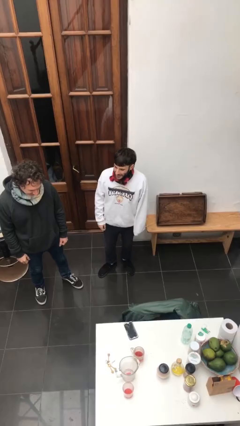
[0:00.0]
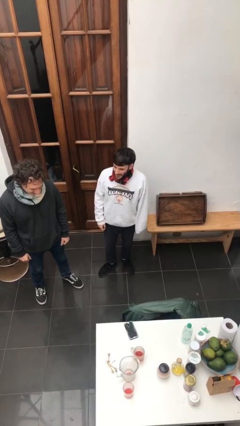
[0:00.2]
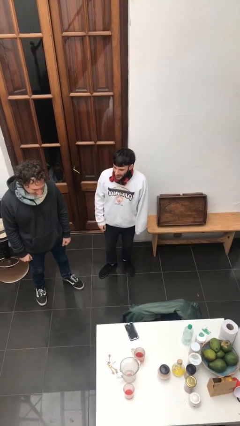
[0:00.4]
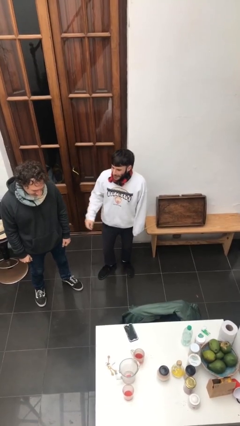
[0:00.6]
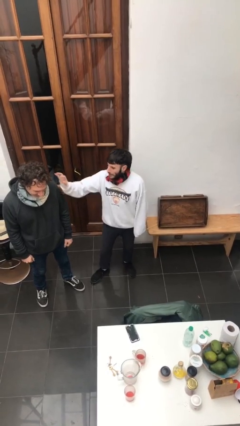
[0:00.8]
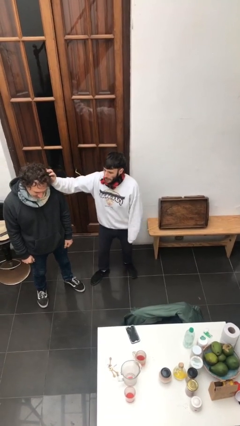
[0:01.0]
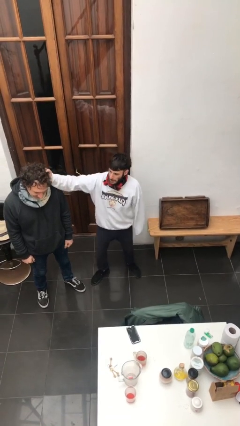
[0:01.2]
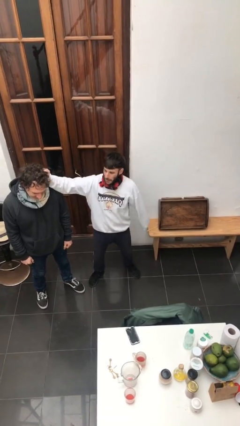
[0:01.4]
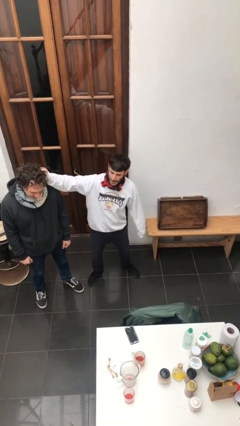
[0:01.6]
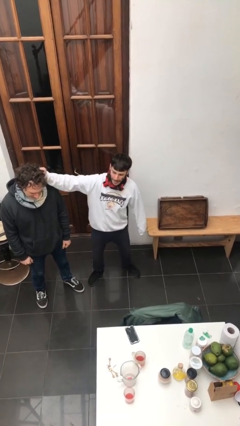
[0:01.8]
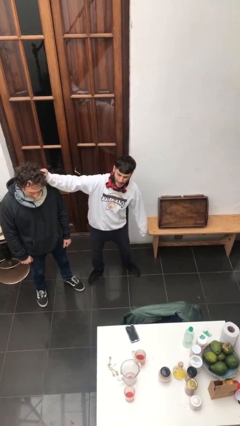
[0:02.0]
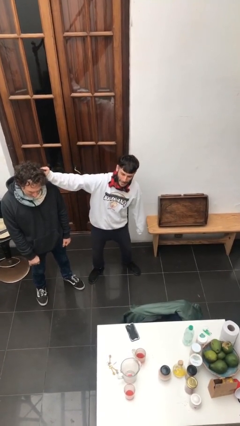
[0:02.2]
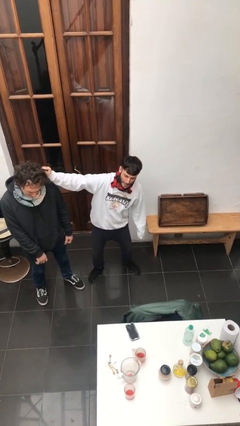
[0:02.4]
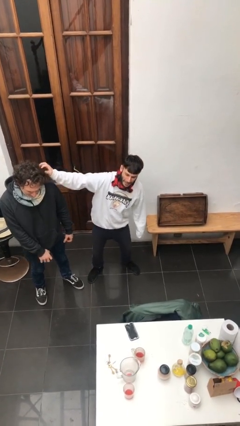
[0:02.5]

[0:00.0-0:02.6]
person grabs person by hair

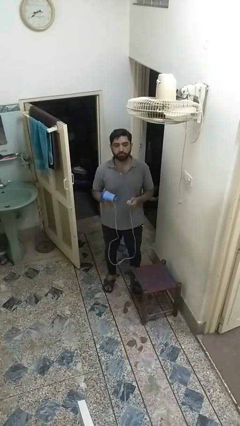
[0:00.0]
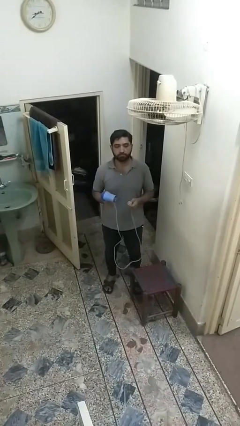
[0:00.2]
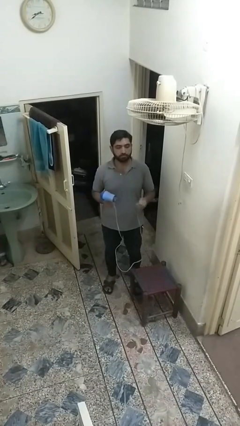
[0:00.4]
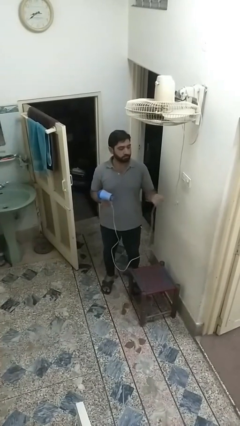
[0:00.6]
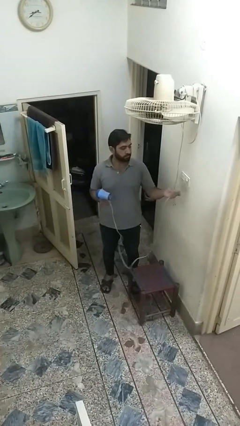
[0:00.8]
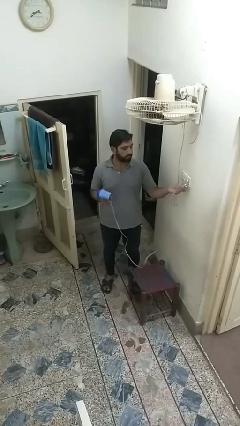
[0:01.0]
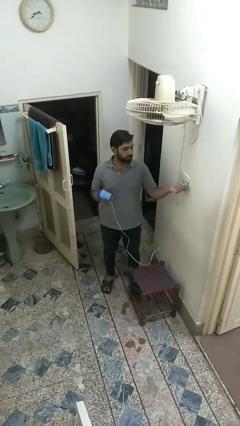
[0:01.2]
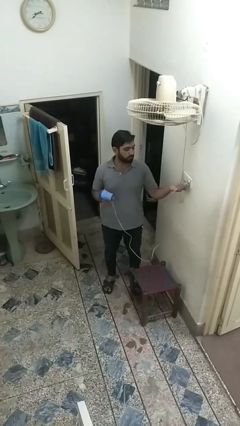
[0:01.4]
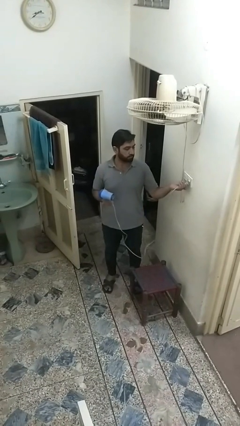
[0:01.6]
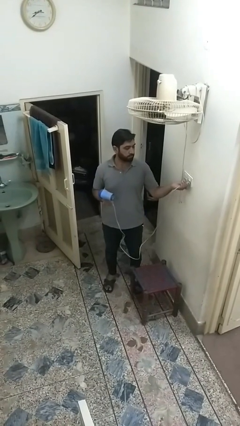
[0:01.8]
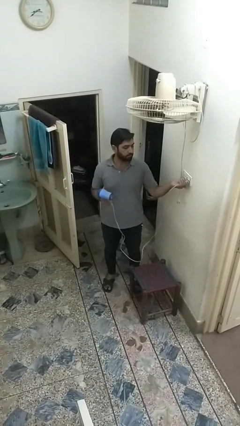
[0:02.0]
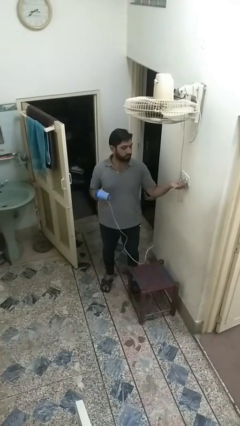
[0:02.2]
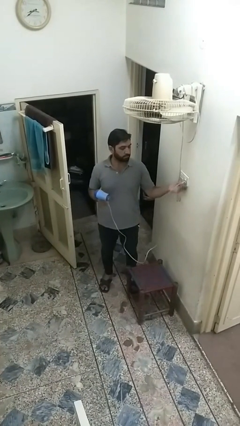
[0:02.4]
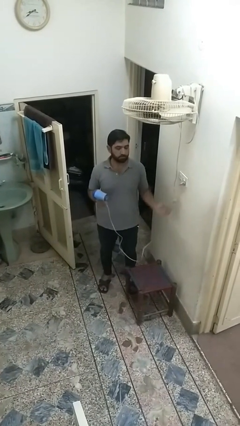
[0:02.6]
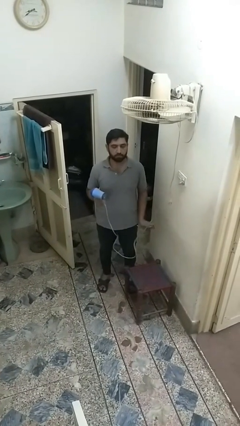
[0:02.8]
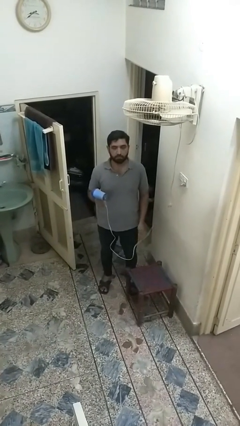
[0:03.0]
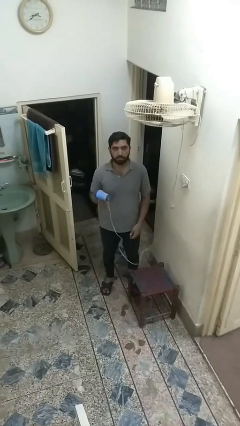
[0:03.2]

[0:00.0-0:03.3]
person plugs into electrical socket

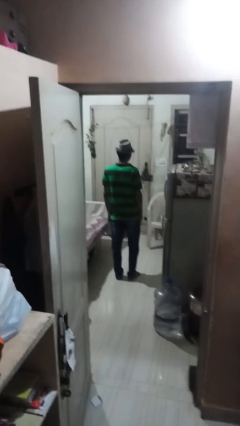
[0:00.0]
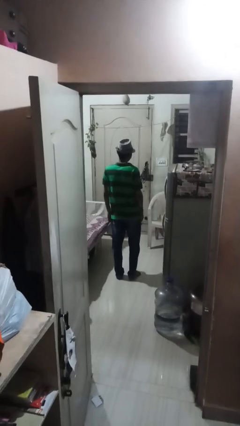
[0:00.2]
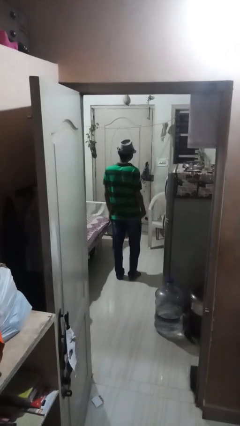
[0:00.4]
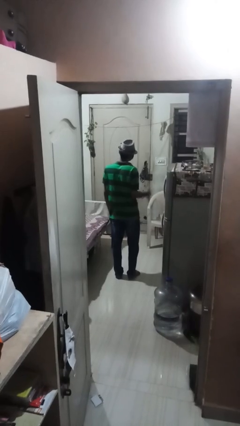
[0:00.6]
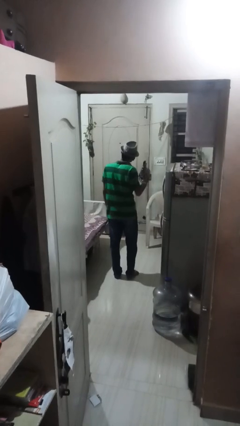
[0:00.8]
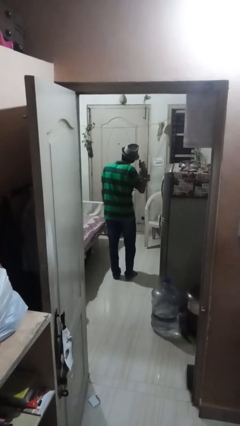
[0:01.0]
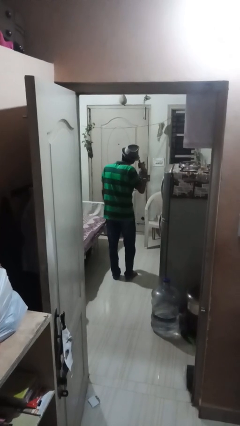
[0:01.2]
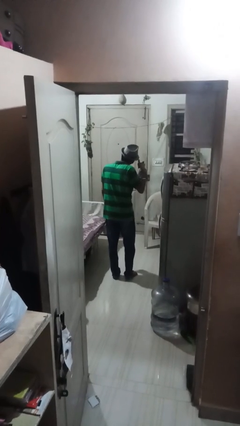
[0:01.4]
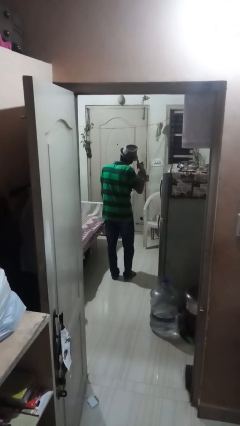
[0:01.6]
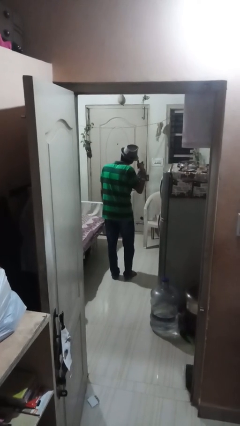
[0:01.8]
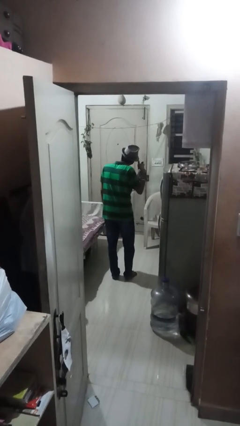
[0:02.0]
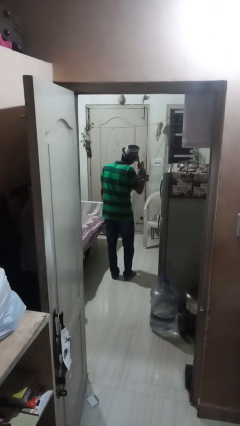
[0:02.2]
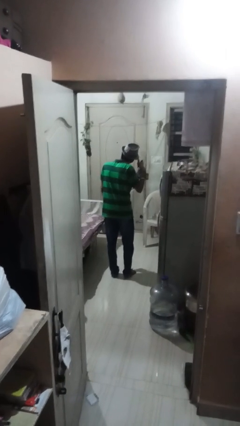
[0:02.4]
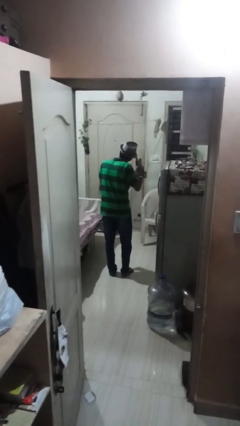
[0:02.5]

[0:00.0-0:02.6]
person gestures call me

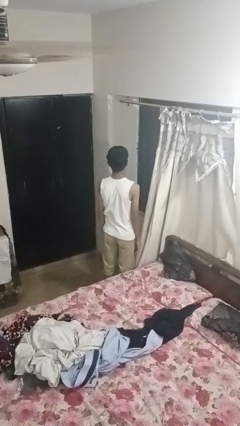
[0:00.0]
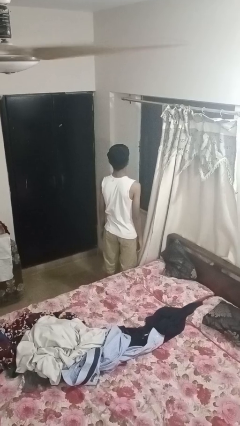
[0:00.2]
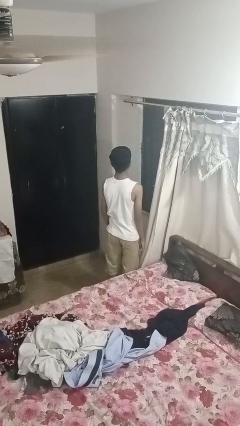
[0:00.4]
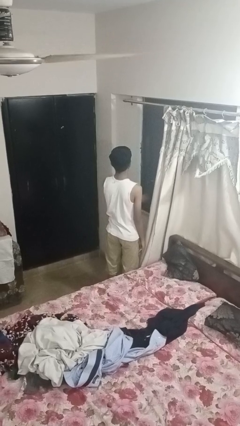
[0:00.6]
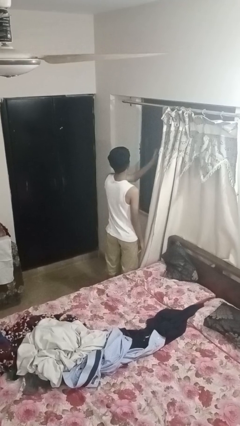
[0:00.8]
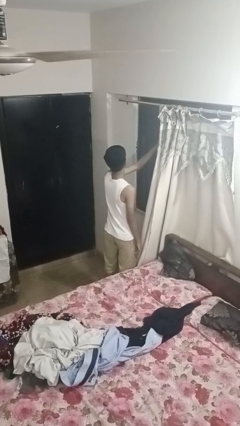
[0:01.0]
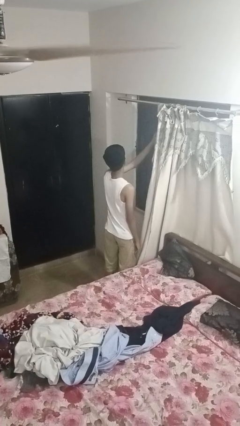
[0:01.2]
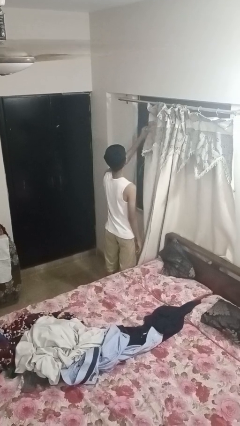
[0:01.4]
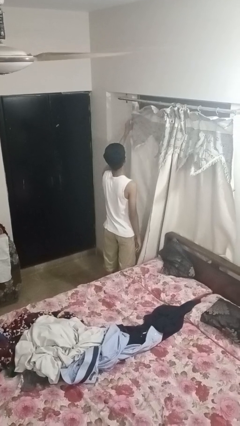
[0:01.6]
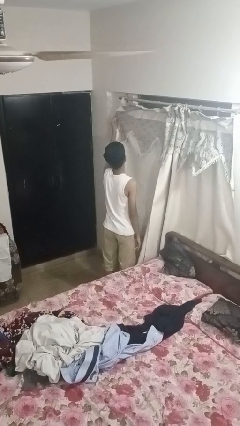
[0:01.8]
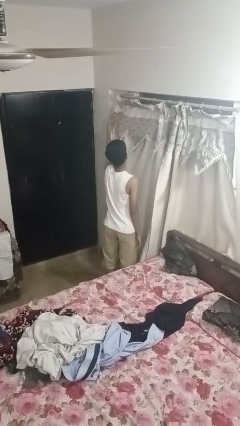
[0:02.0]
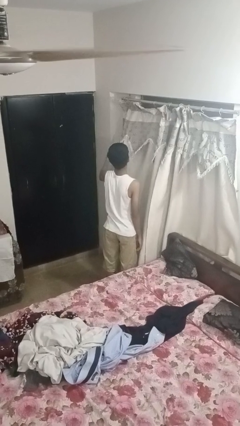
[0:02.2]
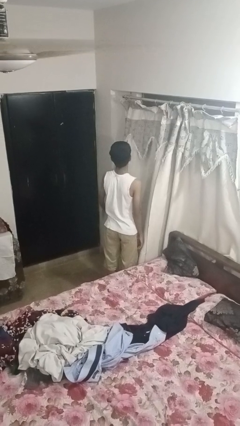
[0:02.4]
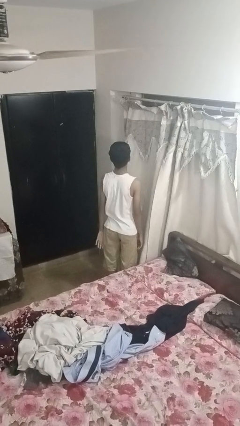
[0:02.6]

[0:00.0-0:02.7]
person closes curtains

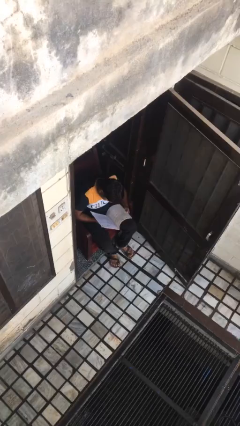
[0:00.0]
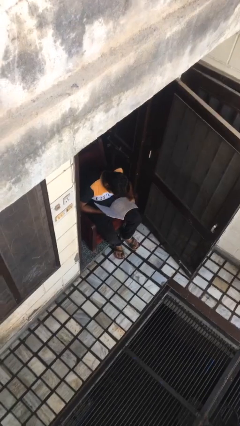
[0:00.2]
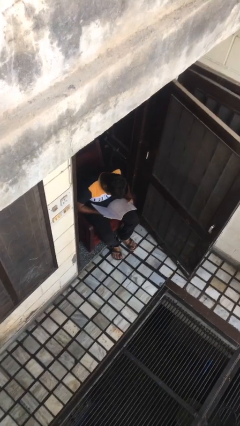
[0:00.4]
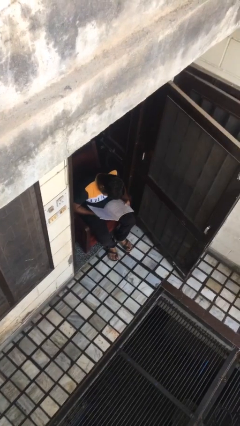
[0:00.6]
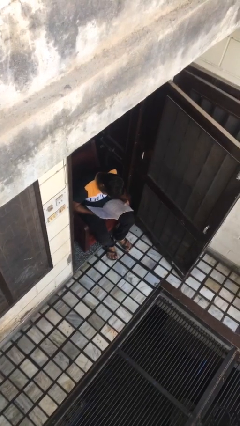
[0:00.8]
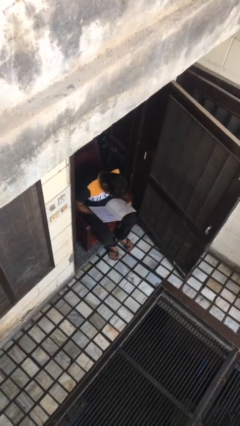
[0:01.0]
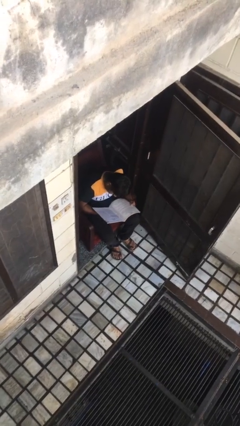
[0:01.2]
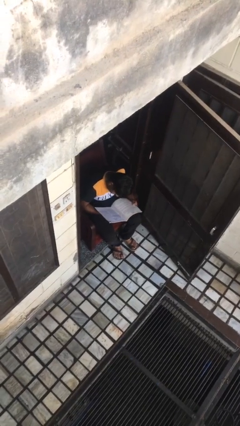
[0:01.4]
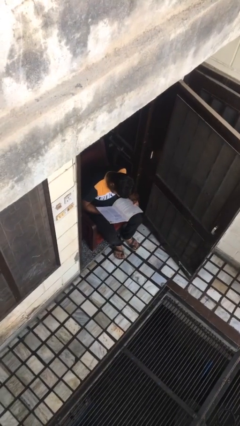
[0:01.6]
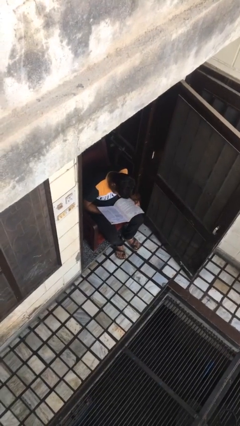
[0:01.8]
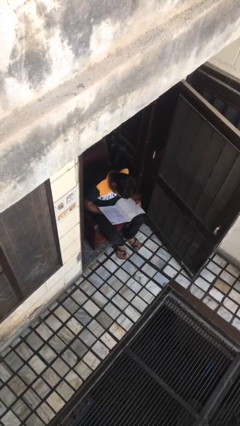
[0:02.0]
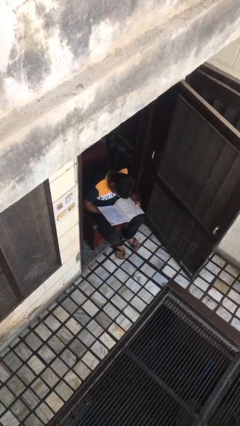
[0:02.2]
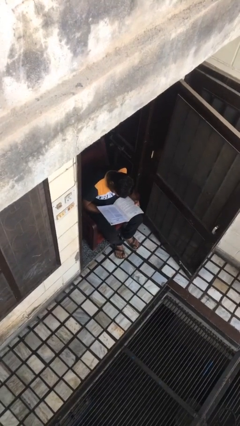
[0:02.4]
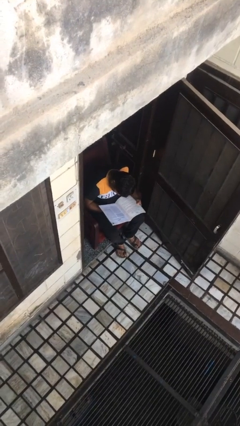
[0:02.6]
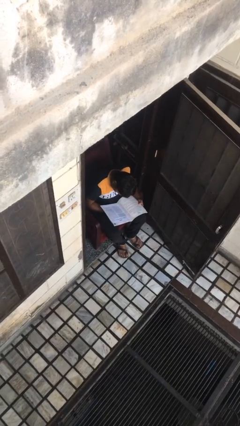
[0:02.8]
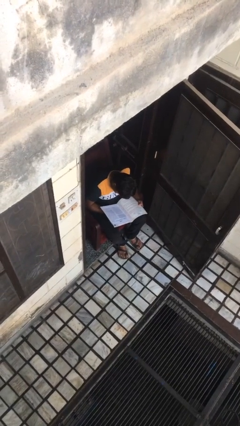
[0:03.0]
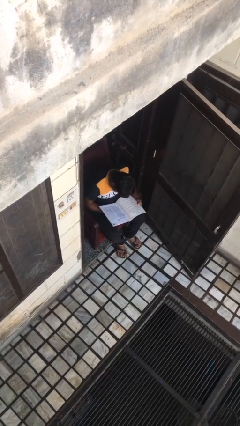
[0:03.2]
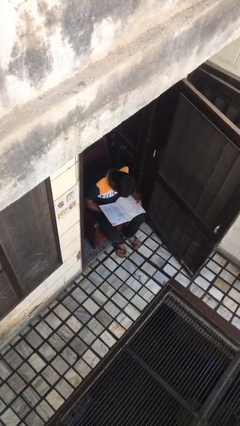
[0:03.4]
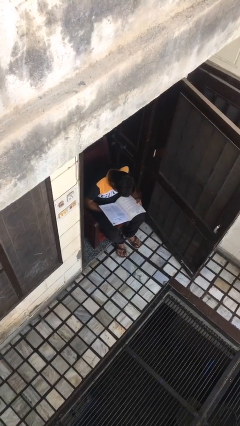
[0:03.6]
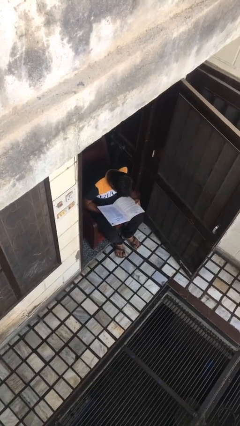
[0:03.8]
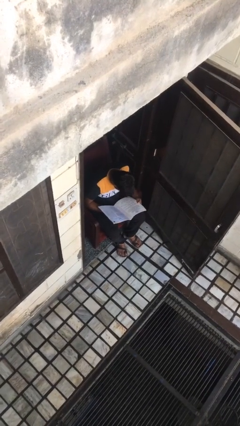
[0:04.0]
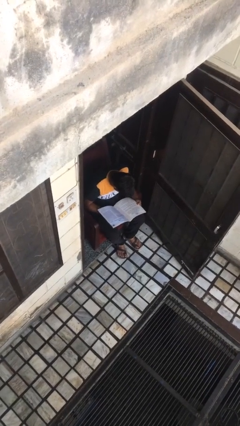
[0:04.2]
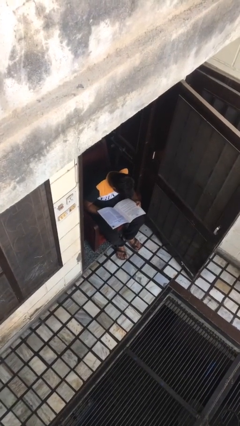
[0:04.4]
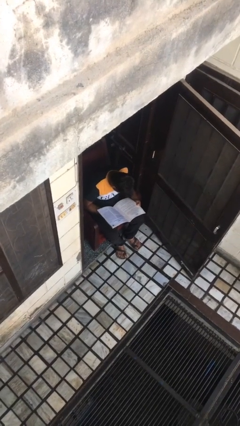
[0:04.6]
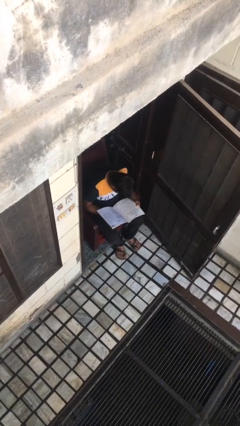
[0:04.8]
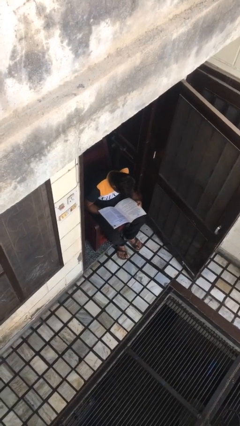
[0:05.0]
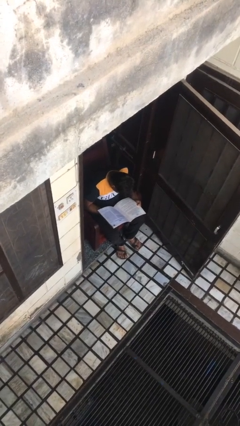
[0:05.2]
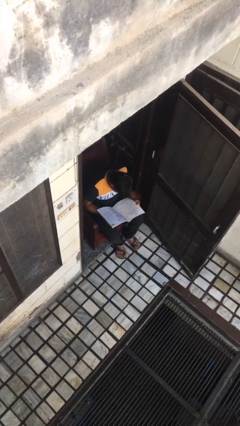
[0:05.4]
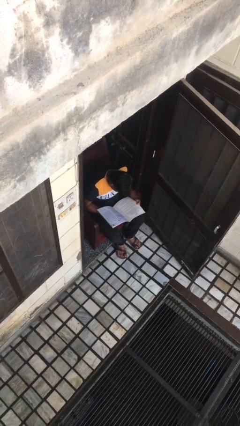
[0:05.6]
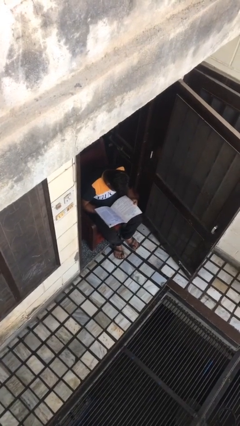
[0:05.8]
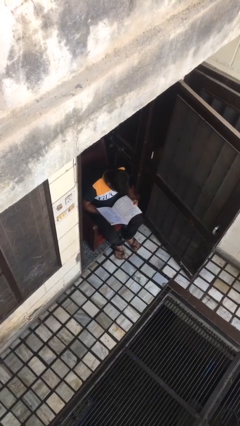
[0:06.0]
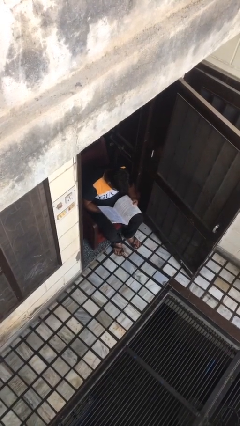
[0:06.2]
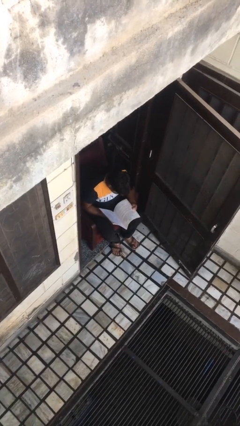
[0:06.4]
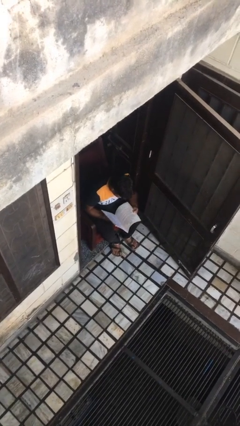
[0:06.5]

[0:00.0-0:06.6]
person reads document

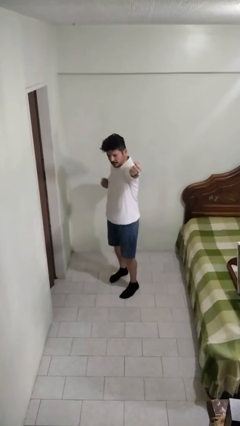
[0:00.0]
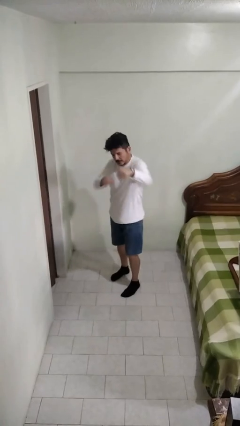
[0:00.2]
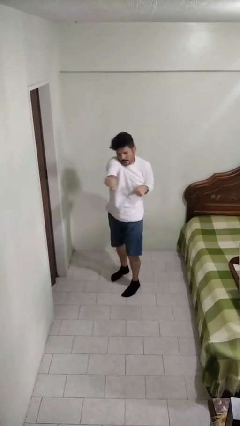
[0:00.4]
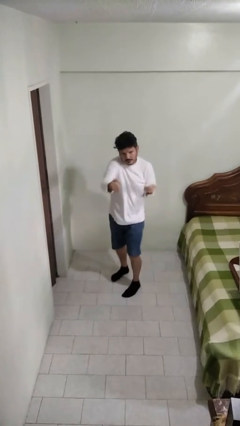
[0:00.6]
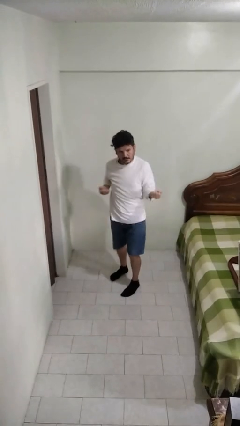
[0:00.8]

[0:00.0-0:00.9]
person karate chop
